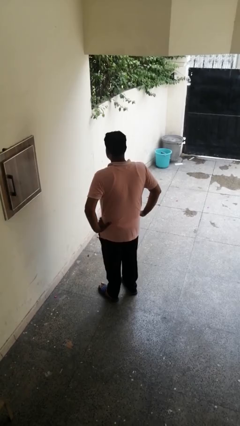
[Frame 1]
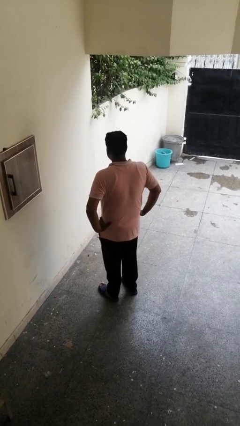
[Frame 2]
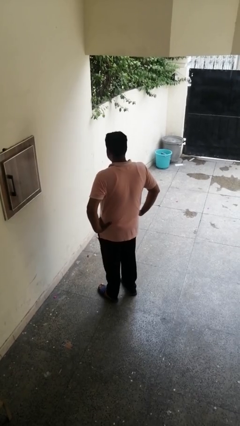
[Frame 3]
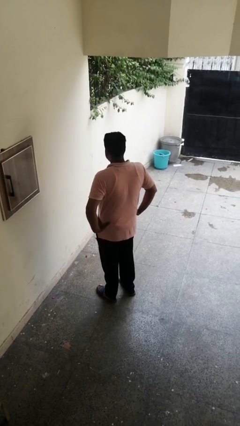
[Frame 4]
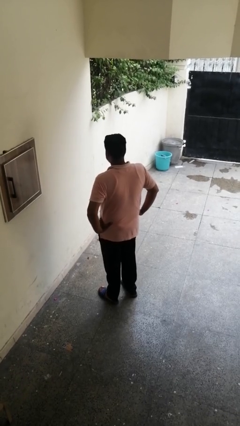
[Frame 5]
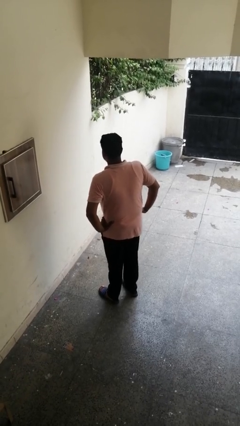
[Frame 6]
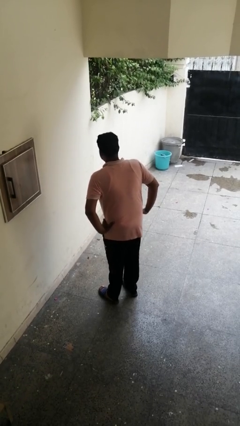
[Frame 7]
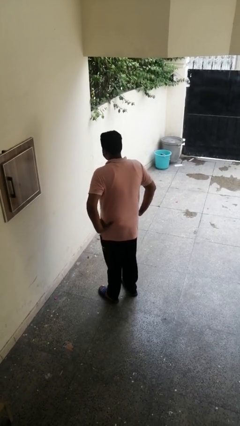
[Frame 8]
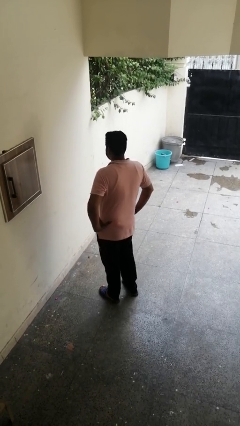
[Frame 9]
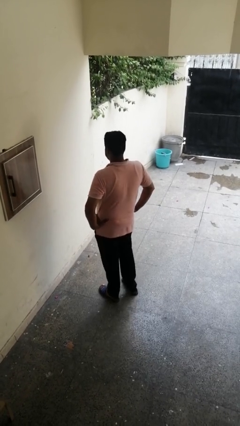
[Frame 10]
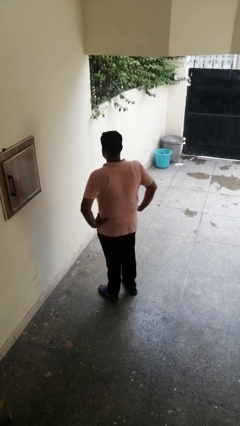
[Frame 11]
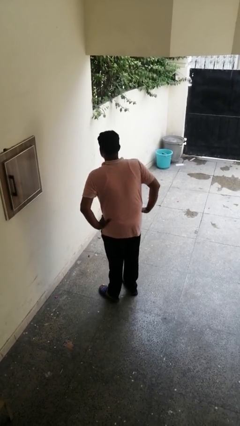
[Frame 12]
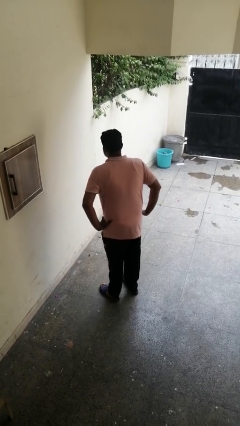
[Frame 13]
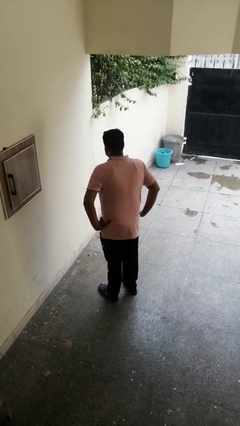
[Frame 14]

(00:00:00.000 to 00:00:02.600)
person wiggles hips

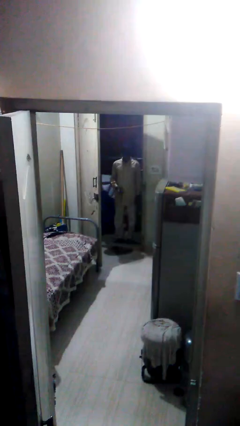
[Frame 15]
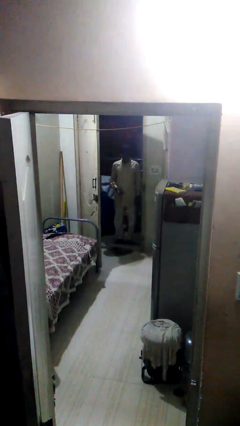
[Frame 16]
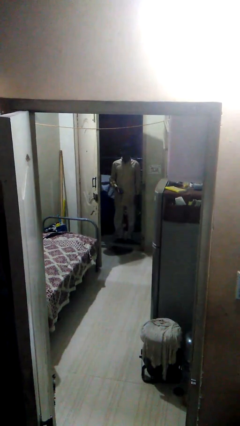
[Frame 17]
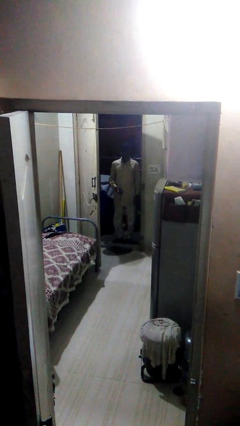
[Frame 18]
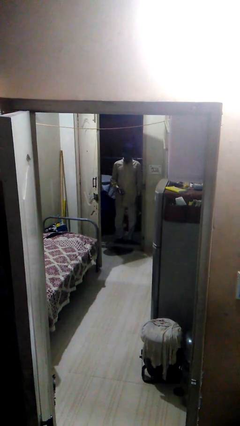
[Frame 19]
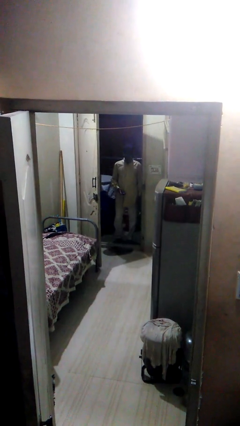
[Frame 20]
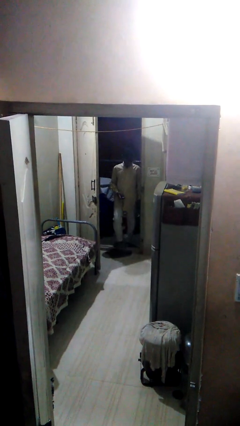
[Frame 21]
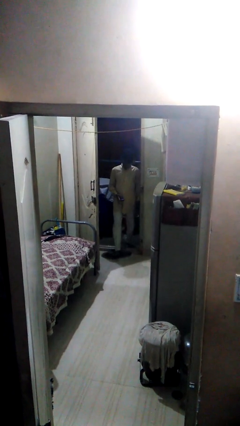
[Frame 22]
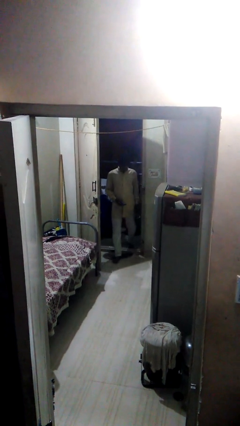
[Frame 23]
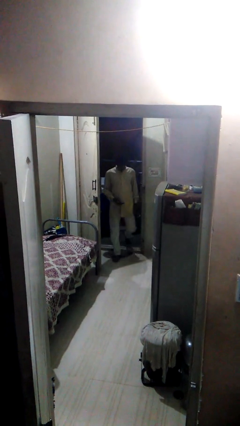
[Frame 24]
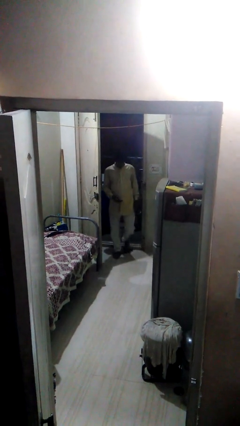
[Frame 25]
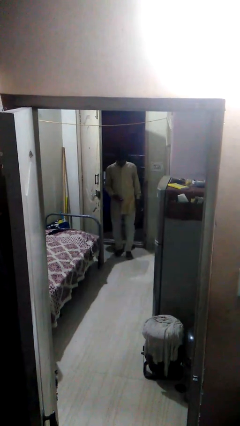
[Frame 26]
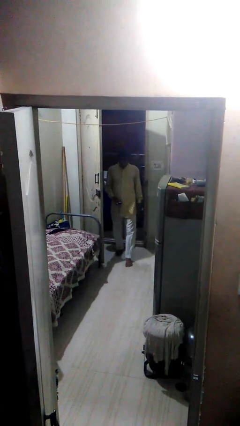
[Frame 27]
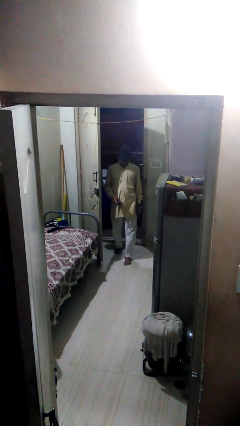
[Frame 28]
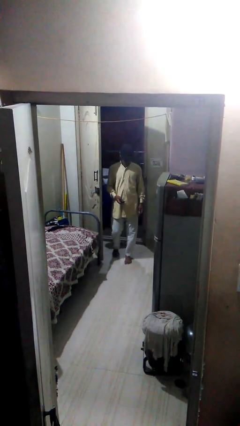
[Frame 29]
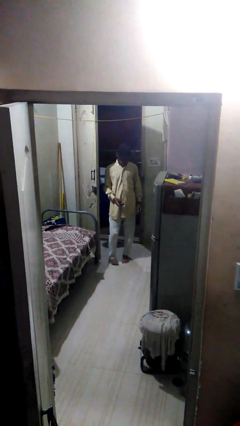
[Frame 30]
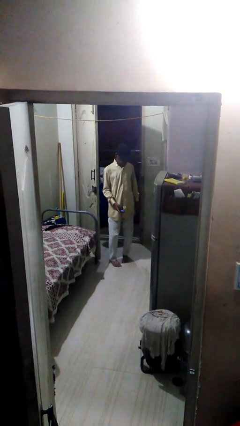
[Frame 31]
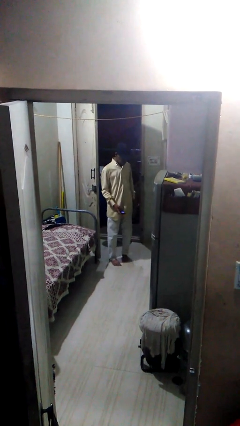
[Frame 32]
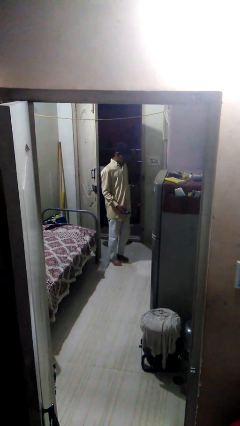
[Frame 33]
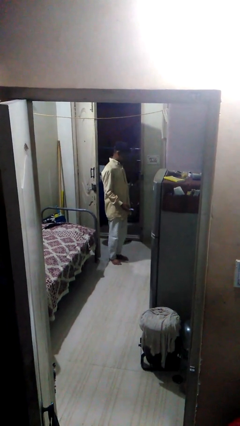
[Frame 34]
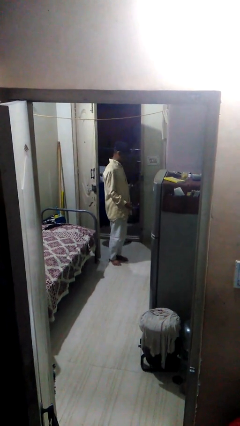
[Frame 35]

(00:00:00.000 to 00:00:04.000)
person enters scene through structure

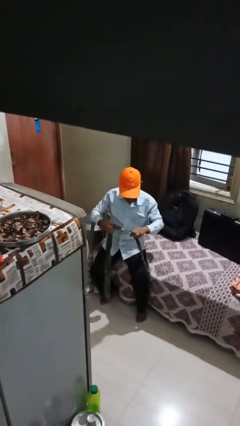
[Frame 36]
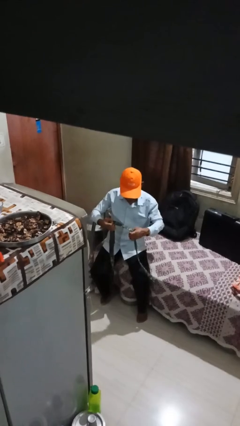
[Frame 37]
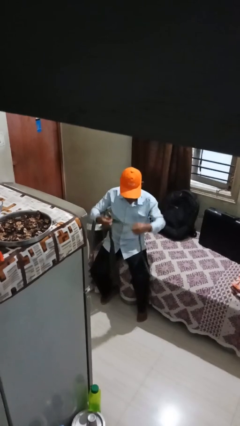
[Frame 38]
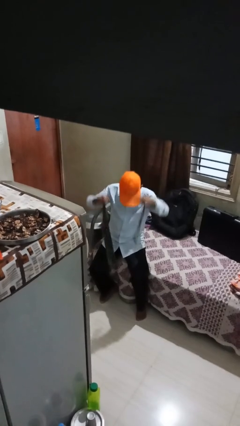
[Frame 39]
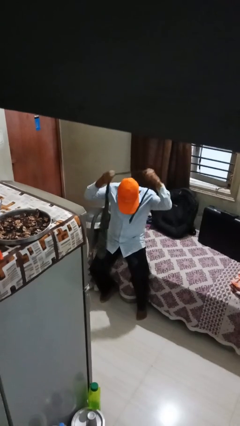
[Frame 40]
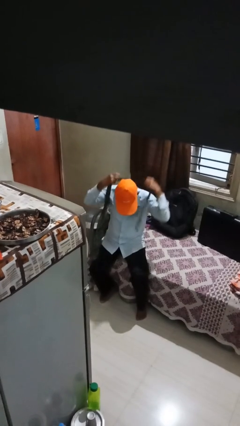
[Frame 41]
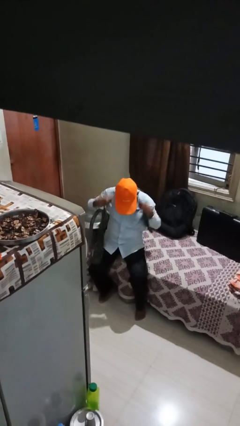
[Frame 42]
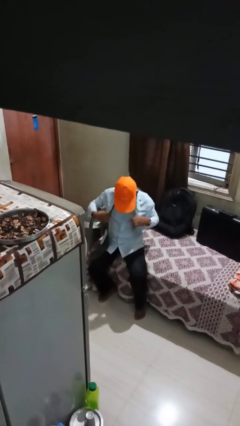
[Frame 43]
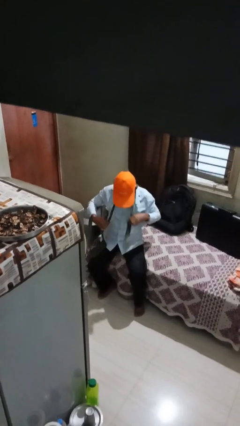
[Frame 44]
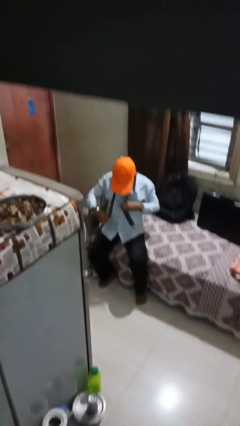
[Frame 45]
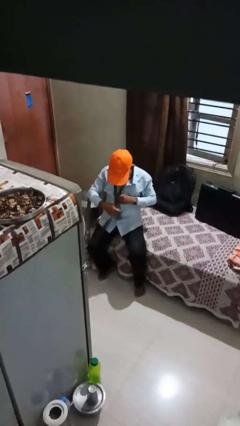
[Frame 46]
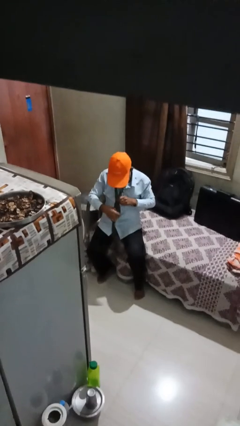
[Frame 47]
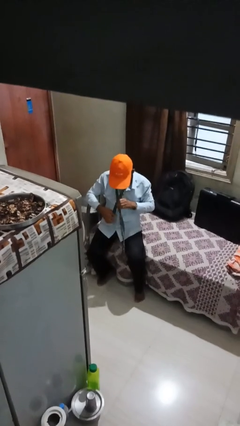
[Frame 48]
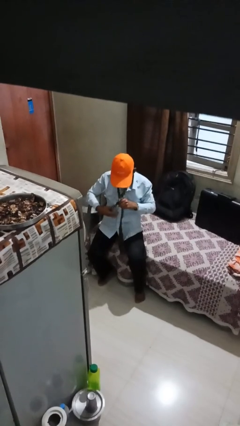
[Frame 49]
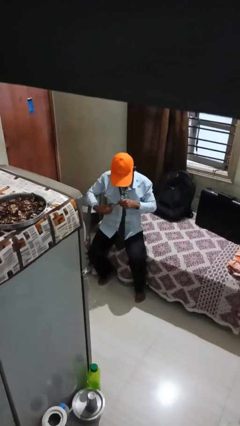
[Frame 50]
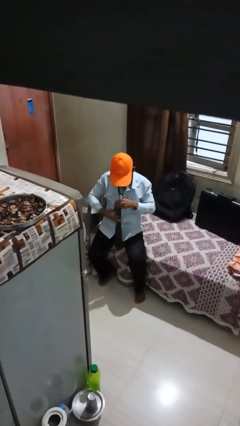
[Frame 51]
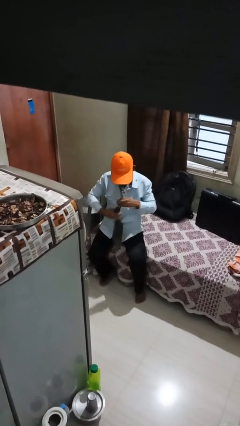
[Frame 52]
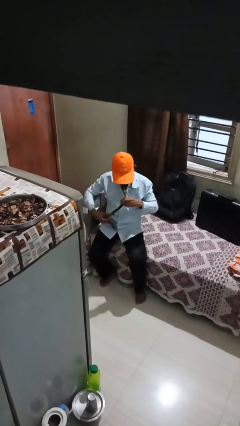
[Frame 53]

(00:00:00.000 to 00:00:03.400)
person puts on necktie

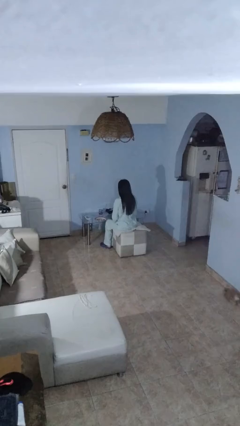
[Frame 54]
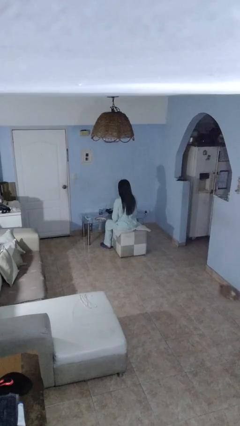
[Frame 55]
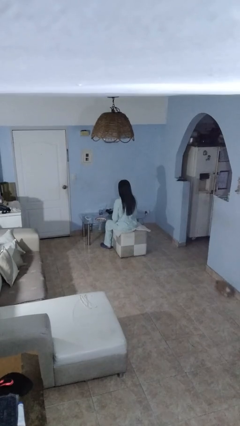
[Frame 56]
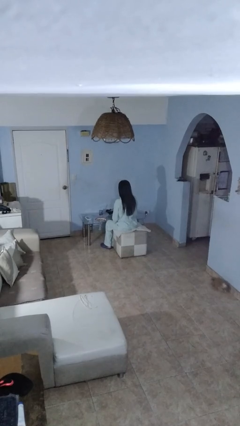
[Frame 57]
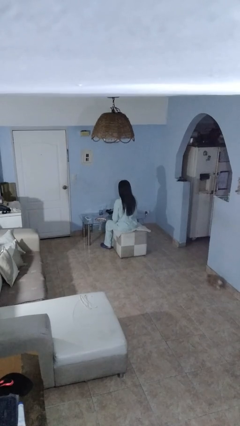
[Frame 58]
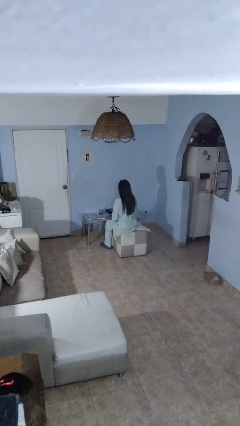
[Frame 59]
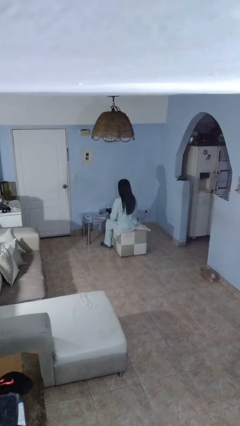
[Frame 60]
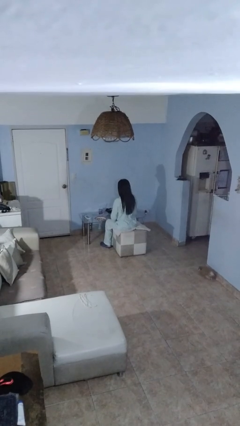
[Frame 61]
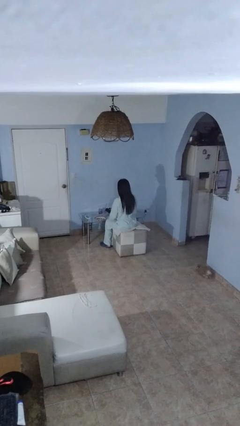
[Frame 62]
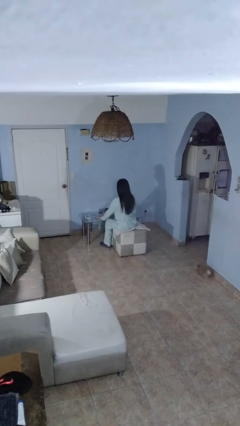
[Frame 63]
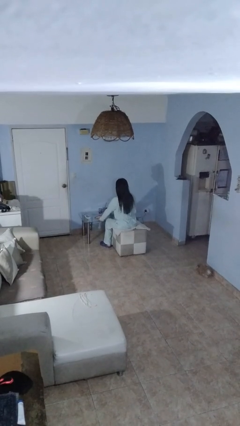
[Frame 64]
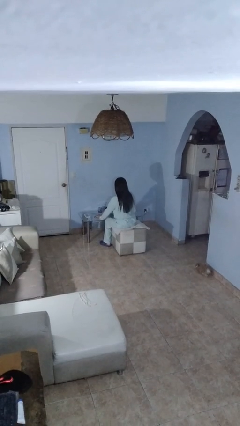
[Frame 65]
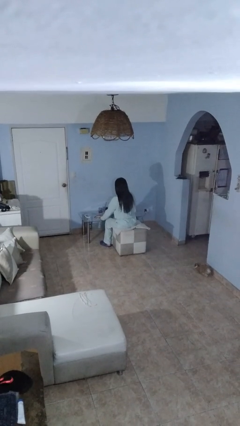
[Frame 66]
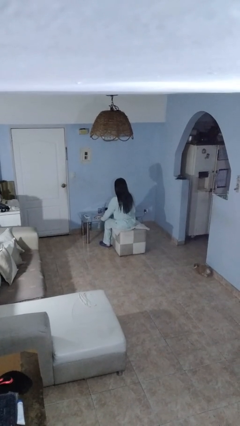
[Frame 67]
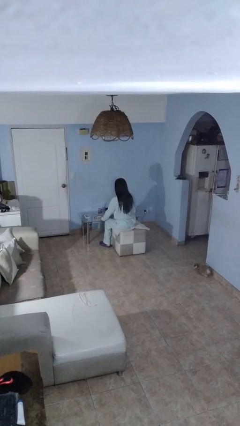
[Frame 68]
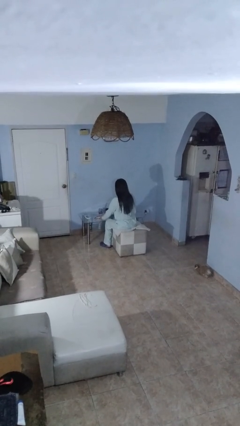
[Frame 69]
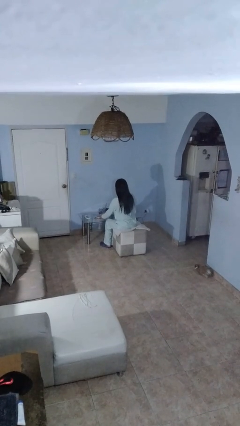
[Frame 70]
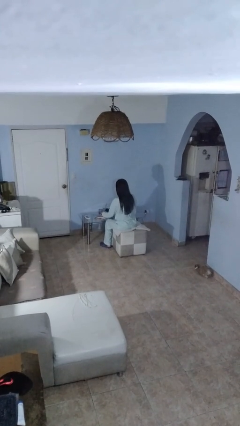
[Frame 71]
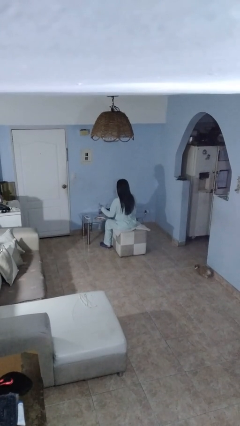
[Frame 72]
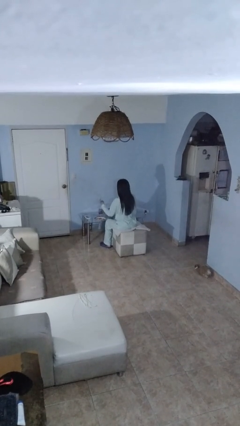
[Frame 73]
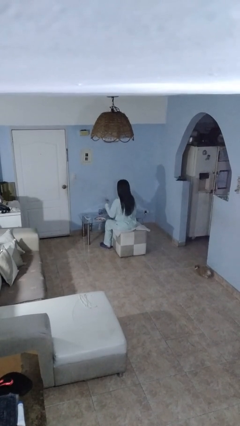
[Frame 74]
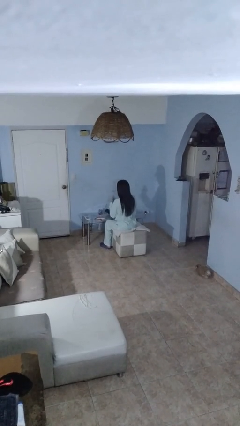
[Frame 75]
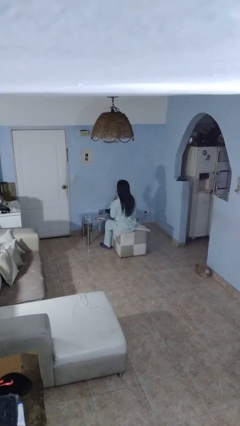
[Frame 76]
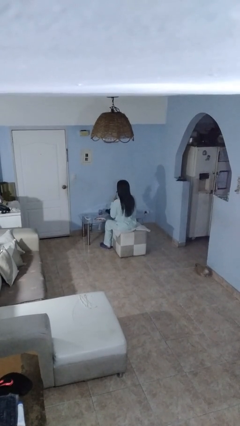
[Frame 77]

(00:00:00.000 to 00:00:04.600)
person turns on lamp

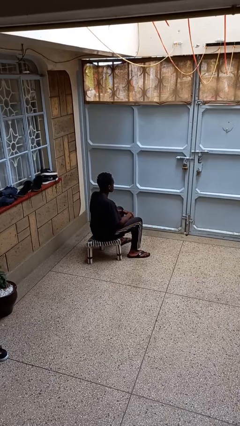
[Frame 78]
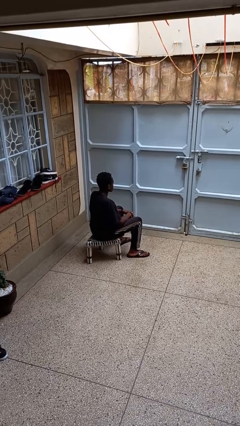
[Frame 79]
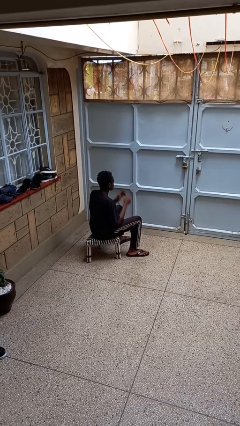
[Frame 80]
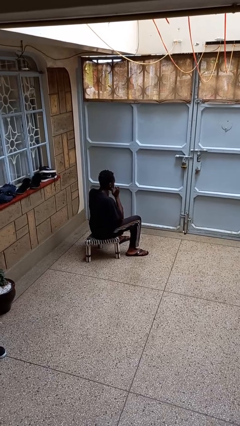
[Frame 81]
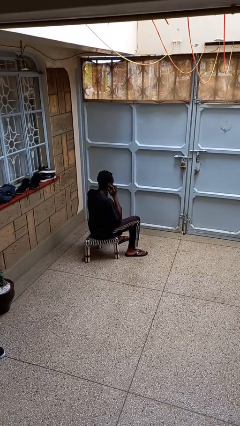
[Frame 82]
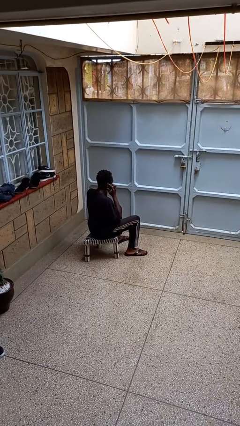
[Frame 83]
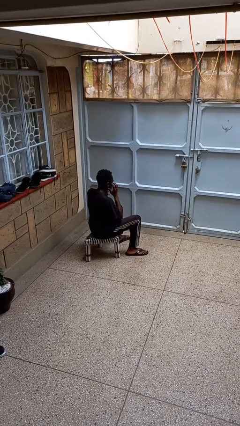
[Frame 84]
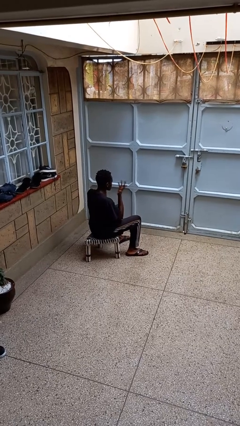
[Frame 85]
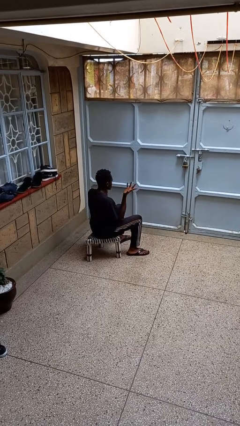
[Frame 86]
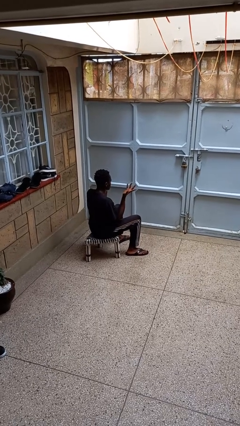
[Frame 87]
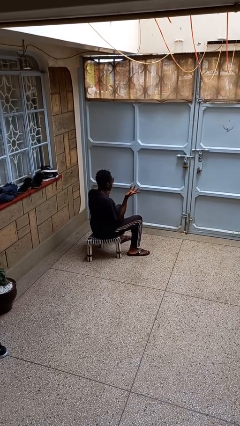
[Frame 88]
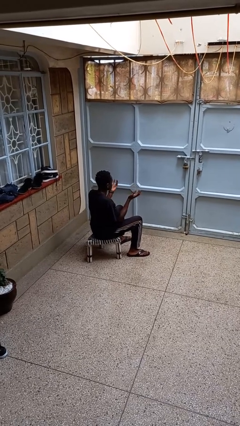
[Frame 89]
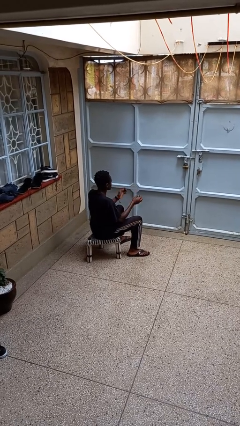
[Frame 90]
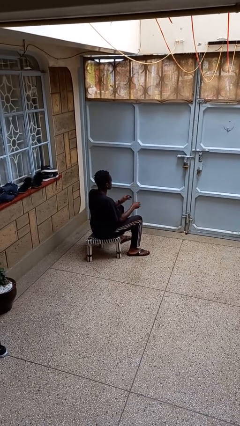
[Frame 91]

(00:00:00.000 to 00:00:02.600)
person puts fingers in ear
